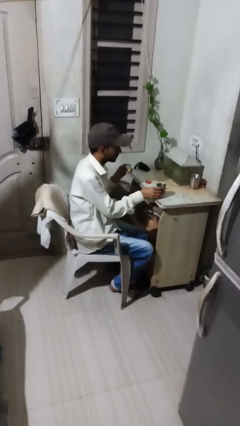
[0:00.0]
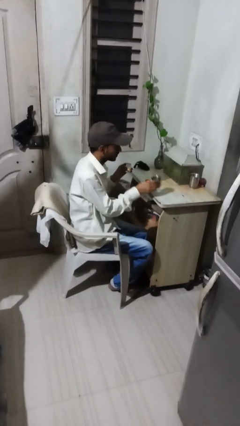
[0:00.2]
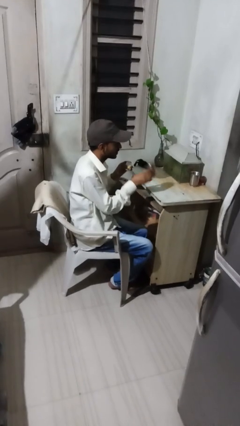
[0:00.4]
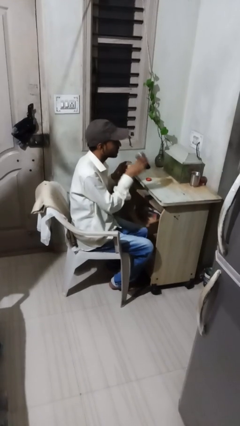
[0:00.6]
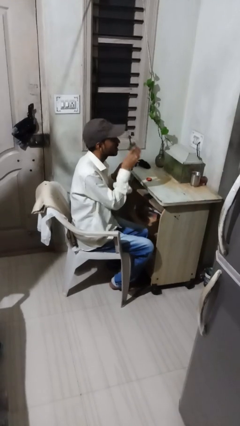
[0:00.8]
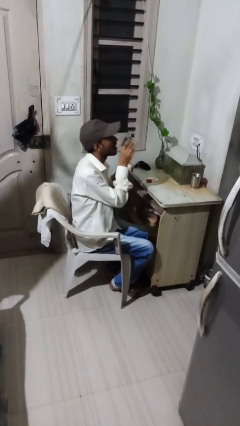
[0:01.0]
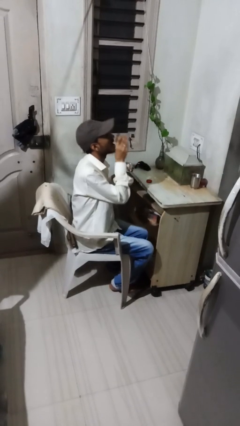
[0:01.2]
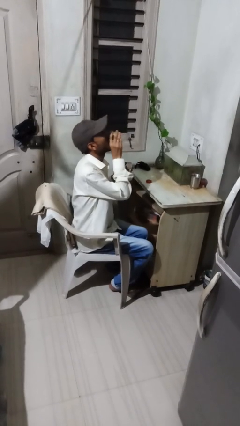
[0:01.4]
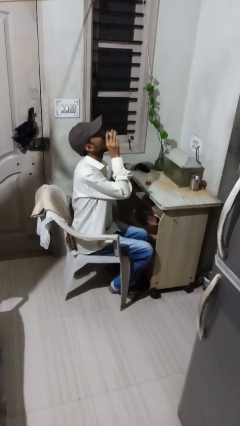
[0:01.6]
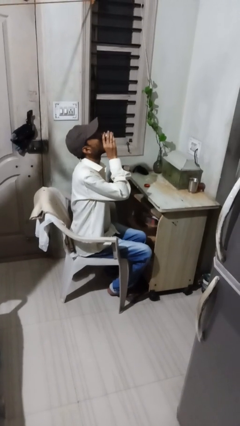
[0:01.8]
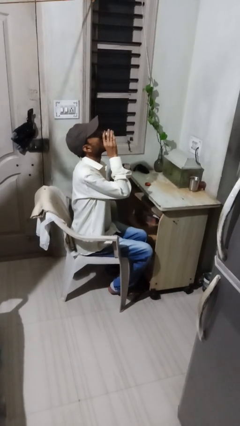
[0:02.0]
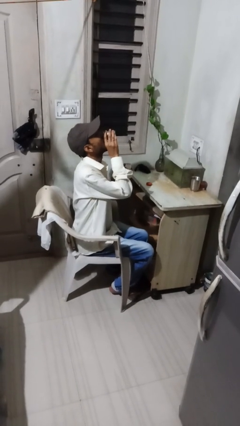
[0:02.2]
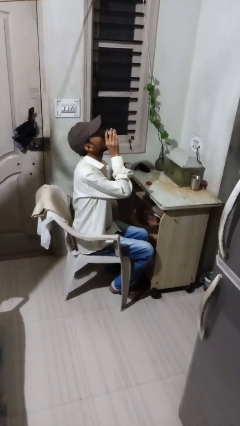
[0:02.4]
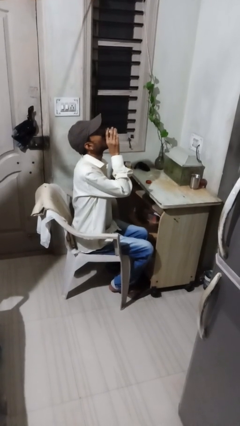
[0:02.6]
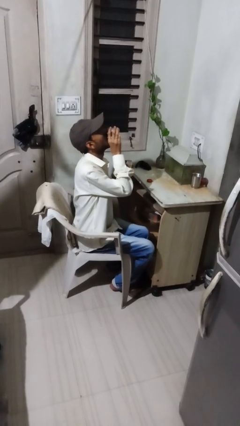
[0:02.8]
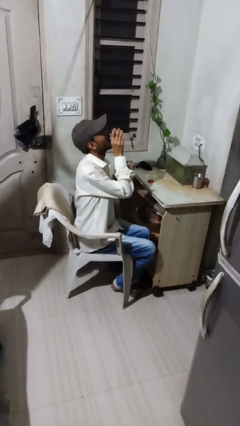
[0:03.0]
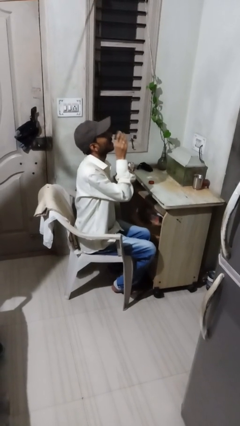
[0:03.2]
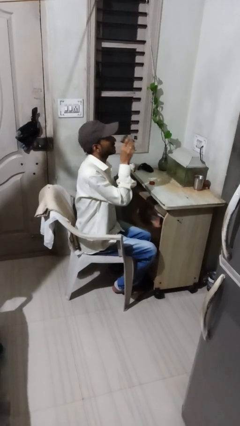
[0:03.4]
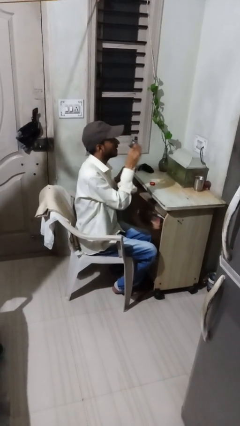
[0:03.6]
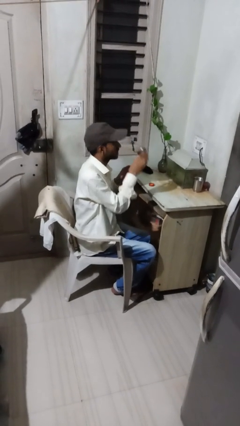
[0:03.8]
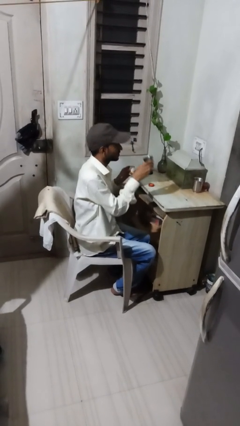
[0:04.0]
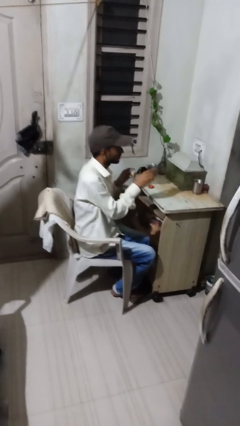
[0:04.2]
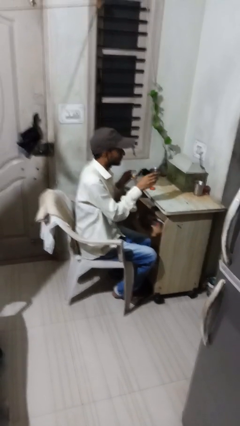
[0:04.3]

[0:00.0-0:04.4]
person drinks from cup

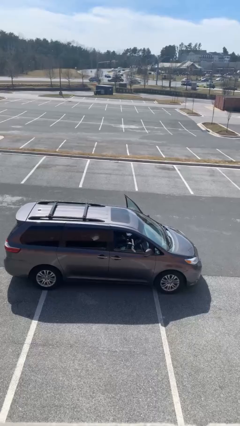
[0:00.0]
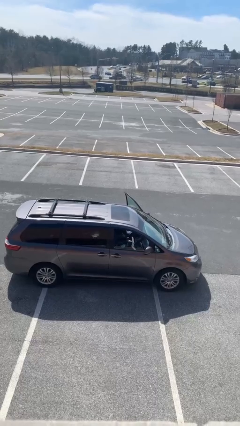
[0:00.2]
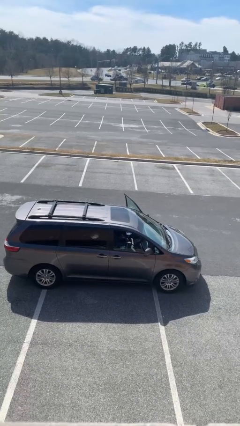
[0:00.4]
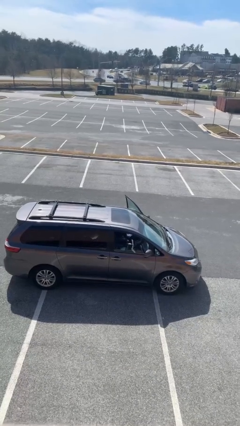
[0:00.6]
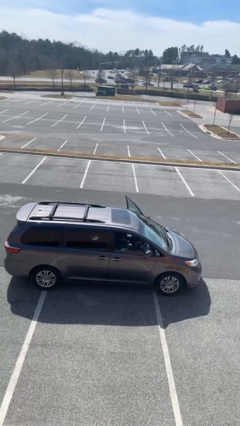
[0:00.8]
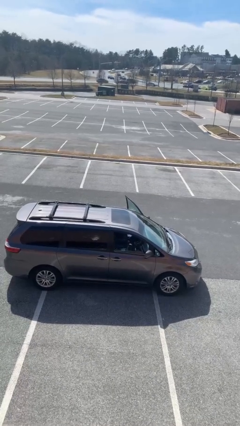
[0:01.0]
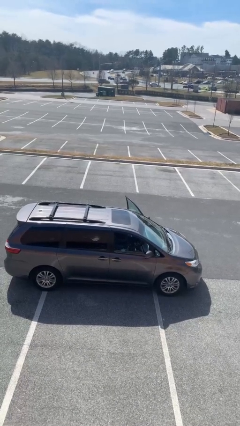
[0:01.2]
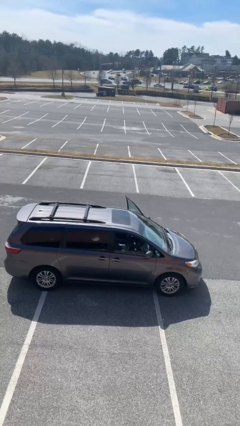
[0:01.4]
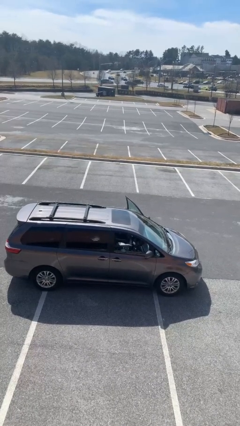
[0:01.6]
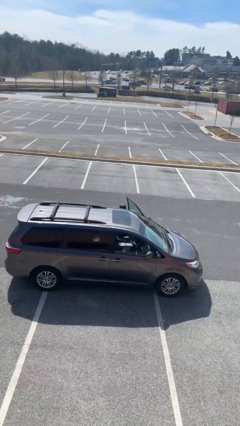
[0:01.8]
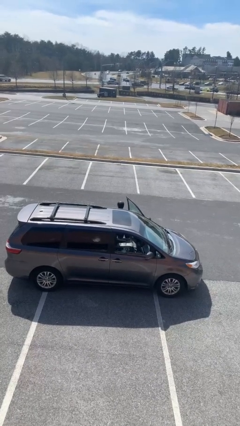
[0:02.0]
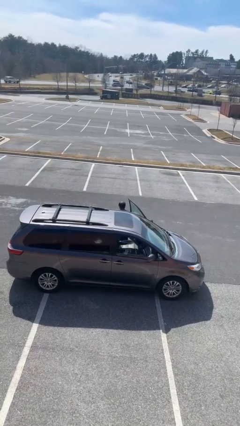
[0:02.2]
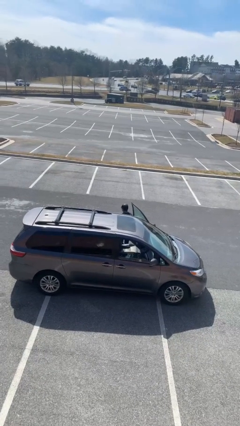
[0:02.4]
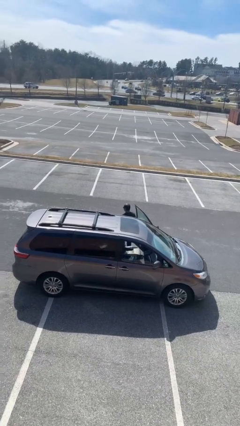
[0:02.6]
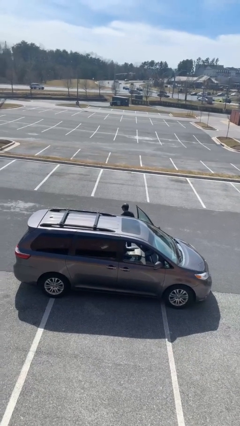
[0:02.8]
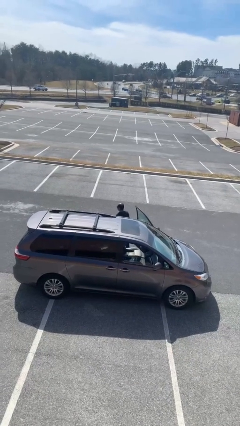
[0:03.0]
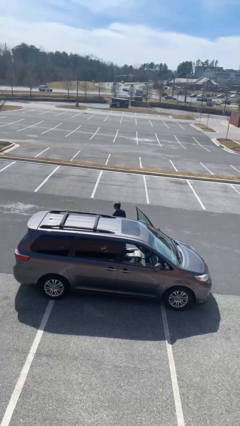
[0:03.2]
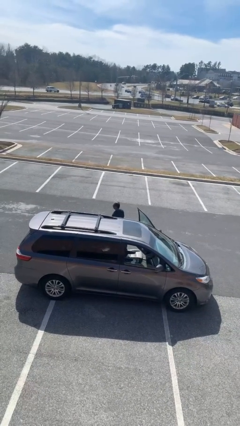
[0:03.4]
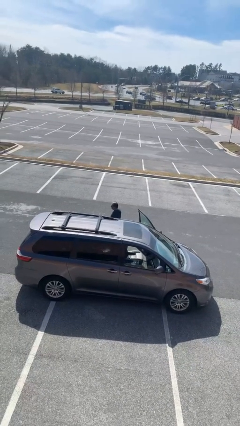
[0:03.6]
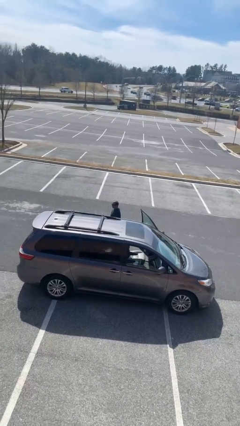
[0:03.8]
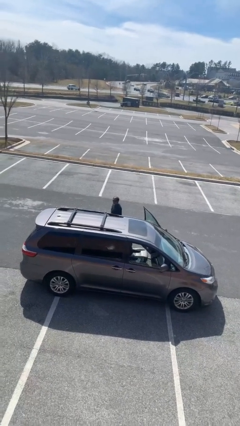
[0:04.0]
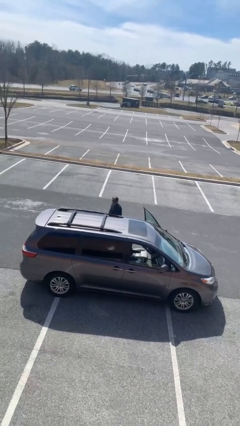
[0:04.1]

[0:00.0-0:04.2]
person exits car

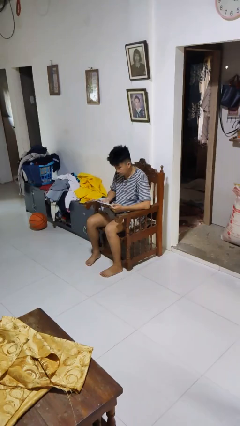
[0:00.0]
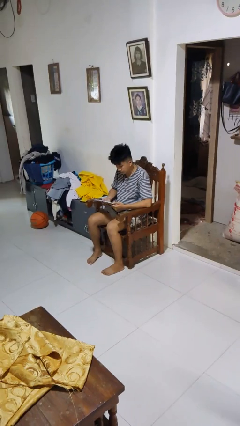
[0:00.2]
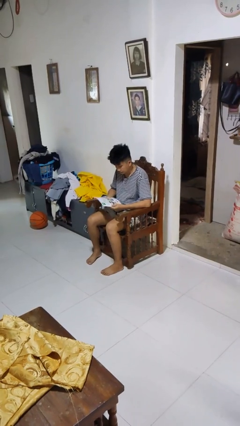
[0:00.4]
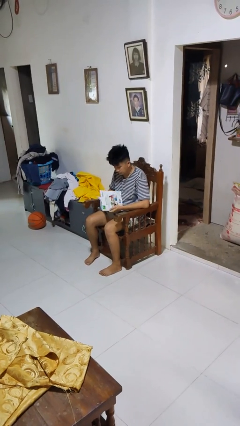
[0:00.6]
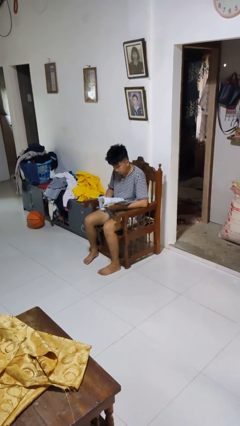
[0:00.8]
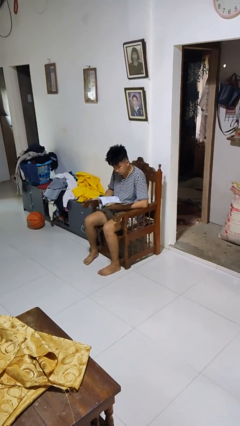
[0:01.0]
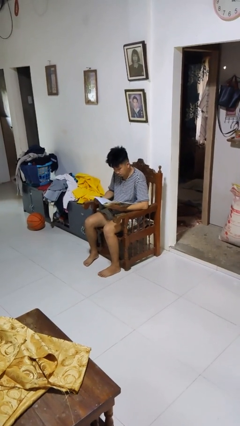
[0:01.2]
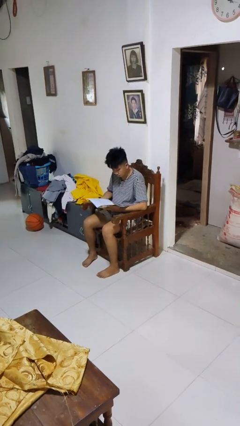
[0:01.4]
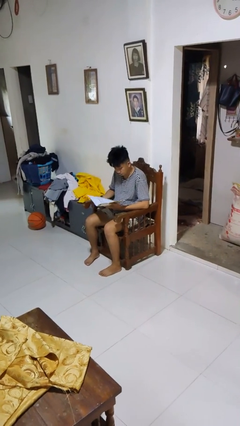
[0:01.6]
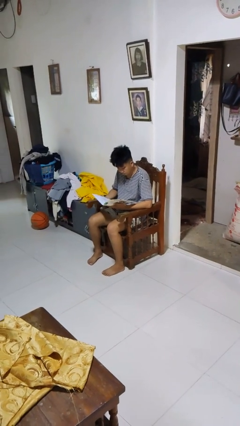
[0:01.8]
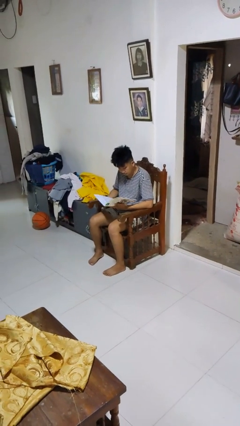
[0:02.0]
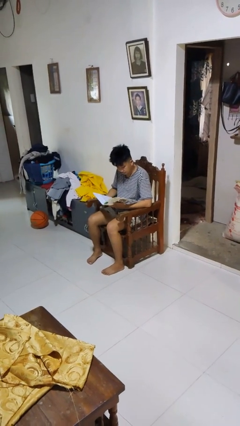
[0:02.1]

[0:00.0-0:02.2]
person reads magazine

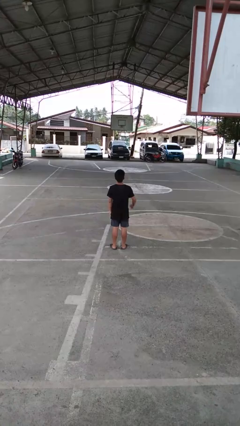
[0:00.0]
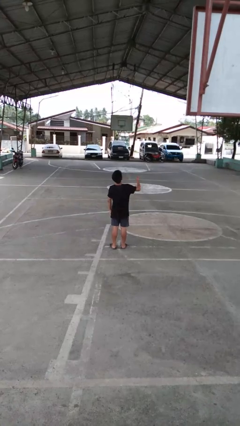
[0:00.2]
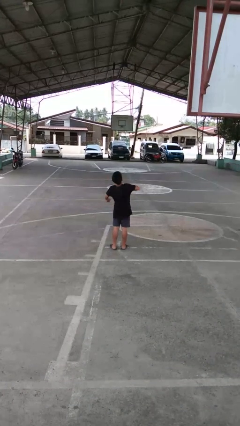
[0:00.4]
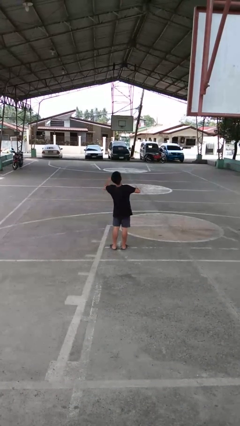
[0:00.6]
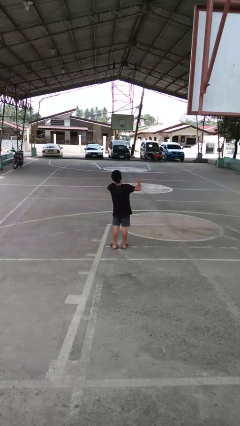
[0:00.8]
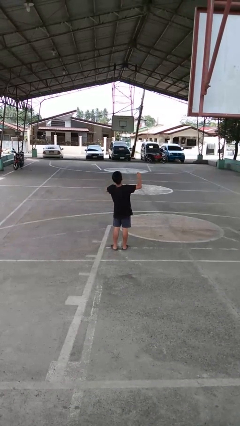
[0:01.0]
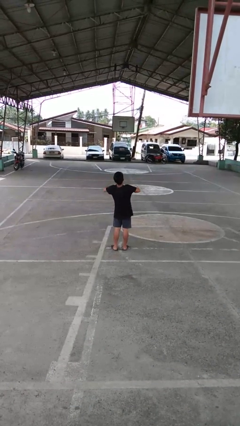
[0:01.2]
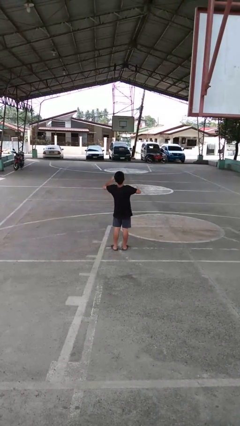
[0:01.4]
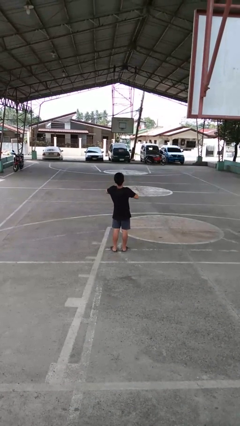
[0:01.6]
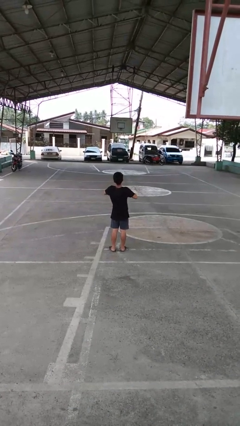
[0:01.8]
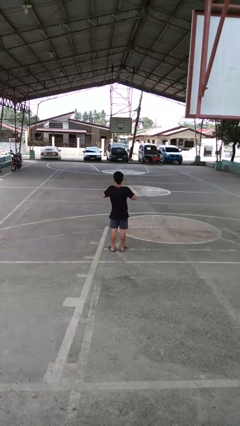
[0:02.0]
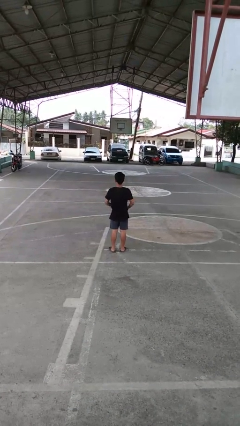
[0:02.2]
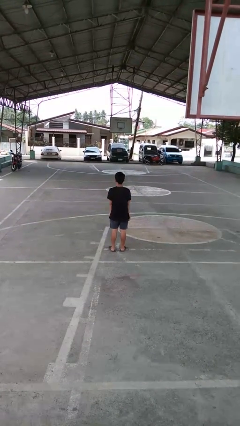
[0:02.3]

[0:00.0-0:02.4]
person drums on chest

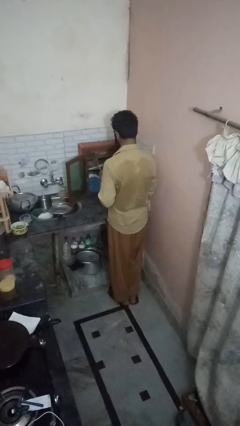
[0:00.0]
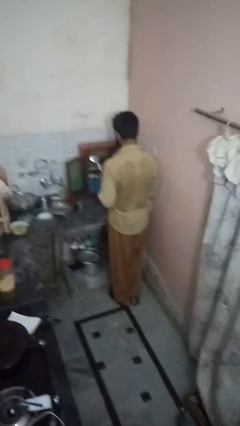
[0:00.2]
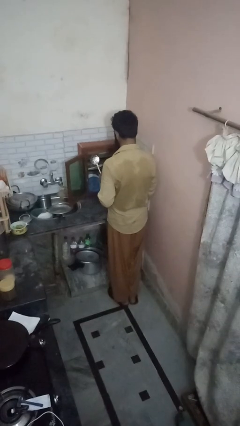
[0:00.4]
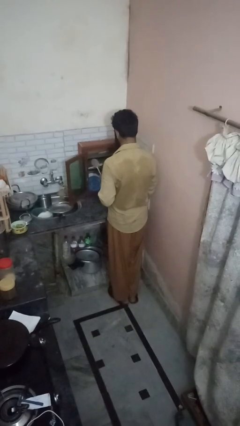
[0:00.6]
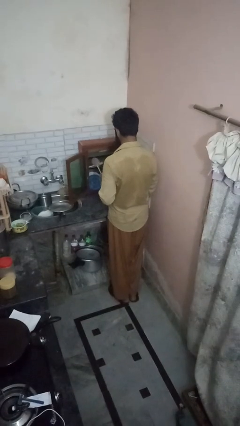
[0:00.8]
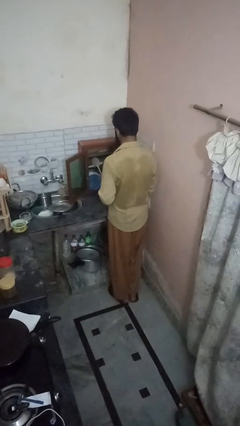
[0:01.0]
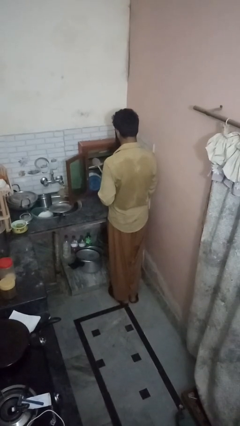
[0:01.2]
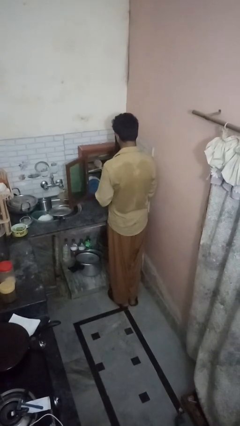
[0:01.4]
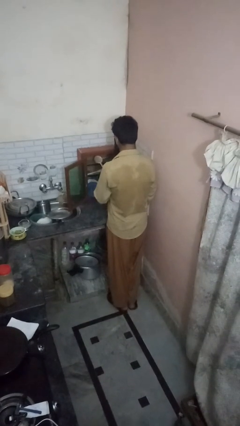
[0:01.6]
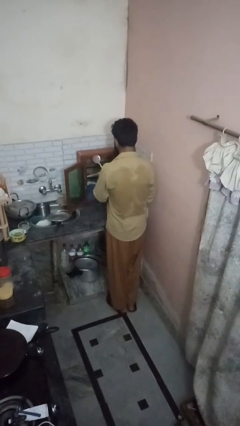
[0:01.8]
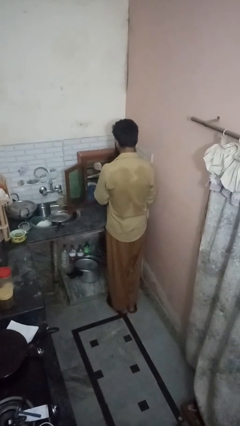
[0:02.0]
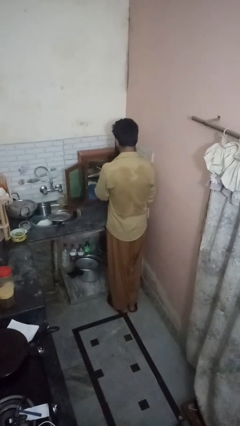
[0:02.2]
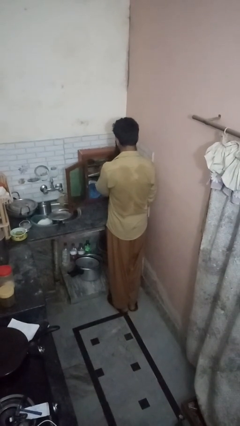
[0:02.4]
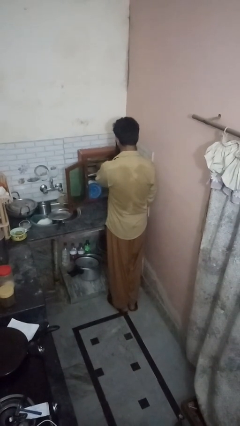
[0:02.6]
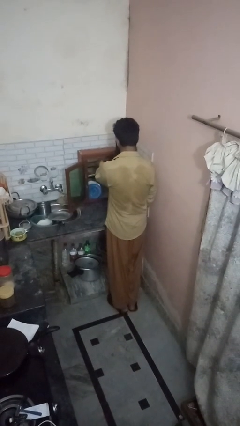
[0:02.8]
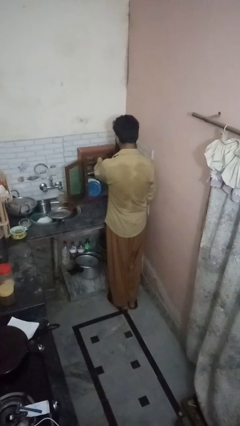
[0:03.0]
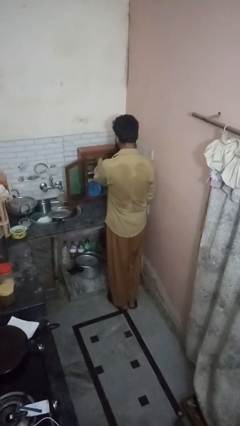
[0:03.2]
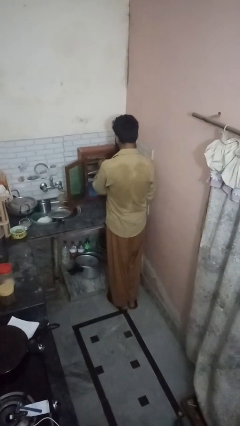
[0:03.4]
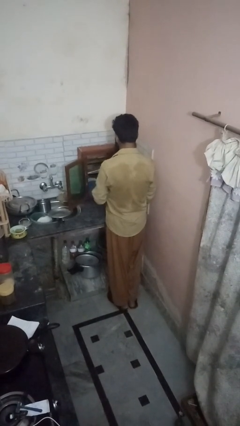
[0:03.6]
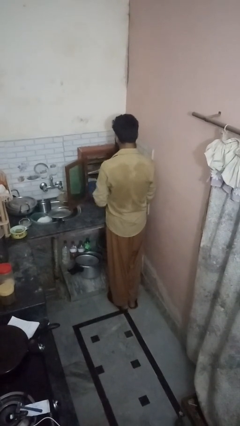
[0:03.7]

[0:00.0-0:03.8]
person takes object from cabinet

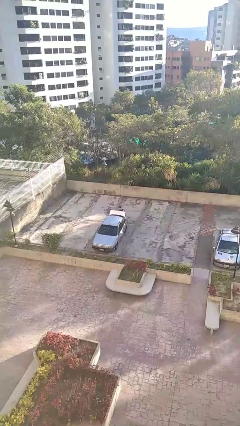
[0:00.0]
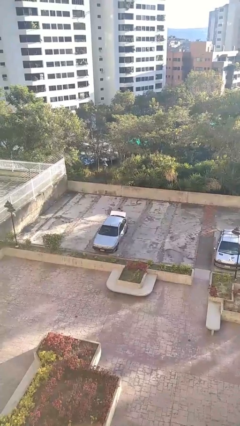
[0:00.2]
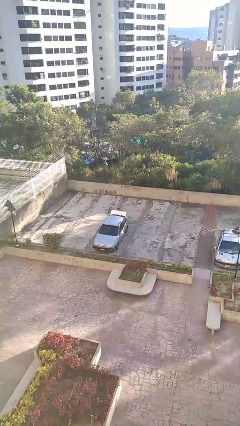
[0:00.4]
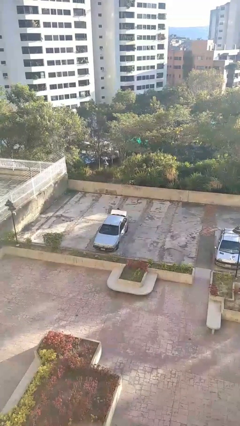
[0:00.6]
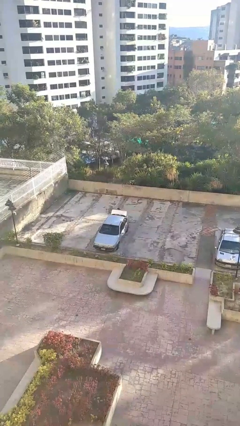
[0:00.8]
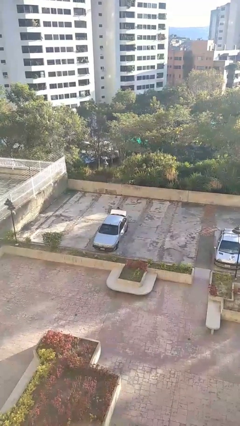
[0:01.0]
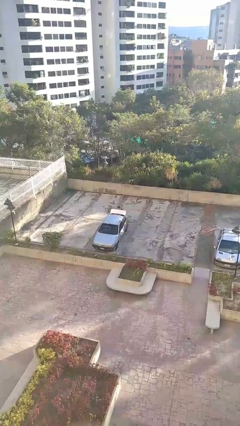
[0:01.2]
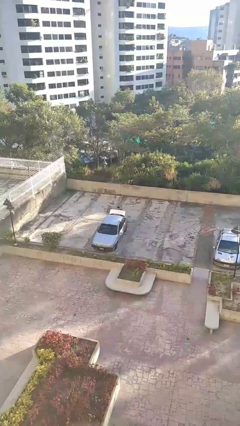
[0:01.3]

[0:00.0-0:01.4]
person loads car
